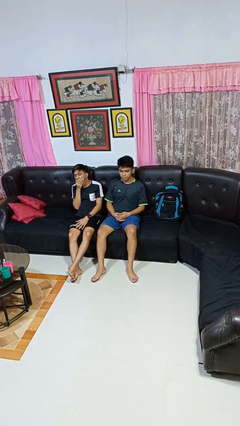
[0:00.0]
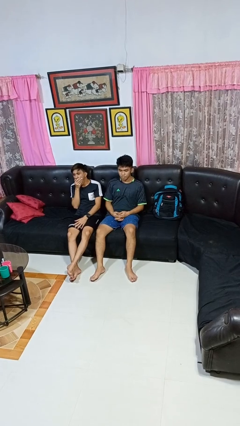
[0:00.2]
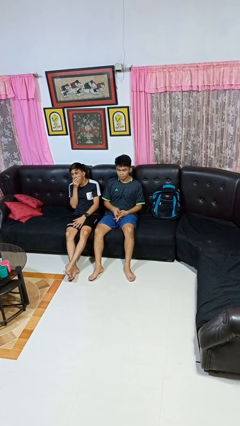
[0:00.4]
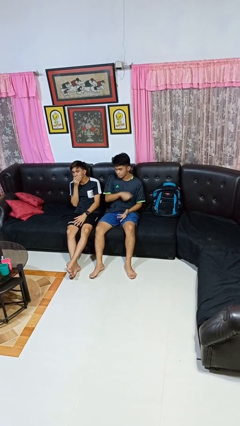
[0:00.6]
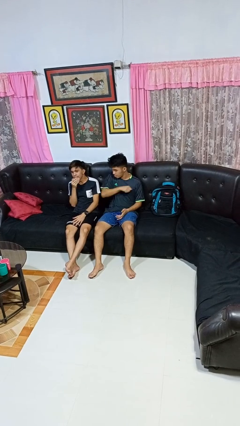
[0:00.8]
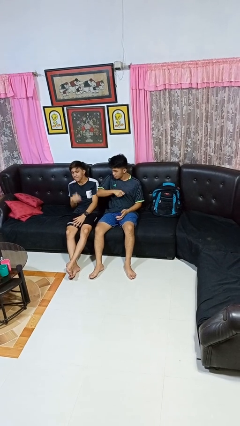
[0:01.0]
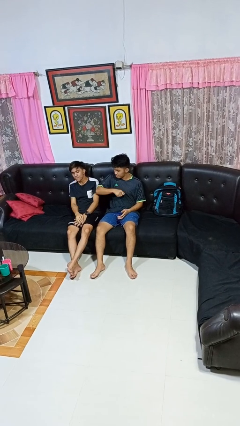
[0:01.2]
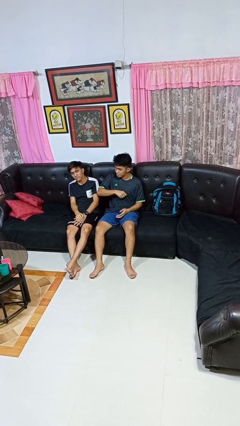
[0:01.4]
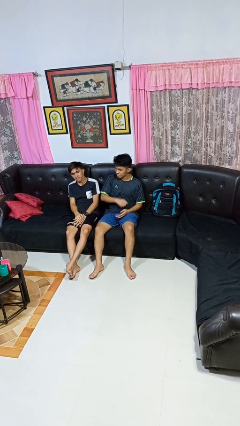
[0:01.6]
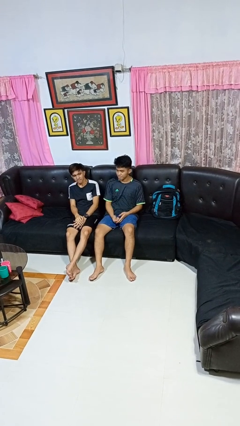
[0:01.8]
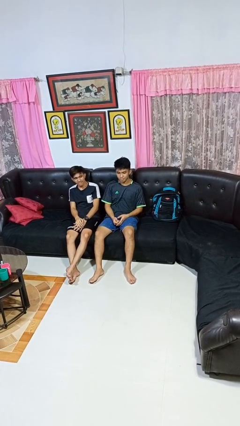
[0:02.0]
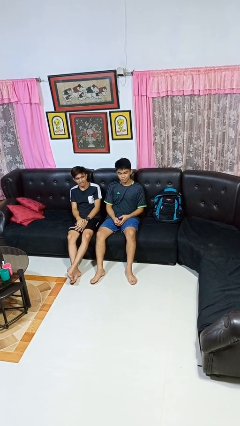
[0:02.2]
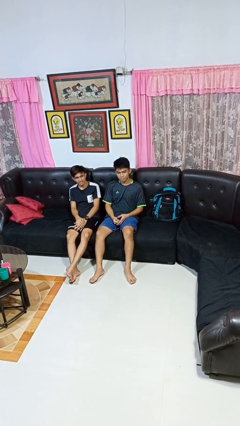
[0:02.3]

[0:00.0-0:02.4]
person nudges person with elbow

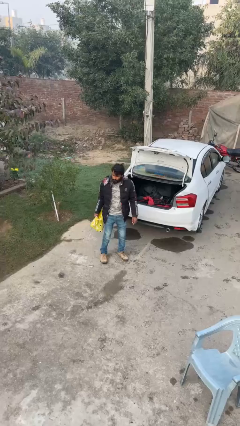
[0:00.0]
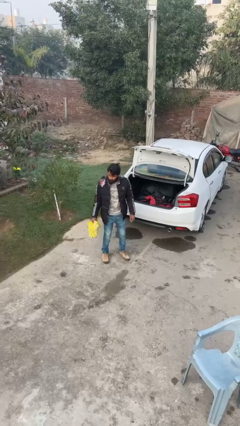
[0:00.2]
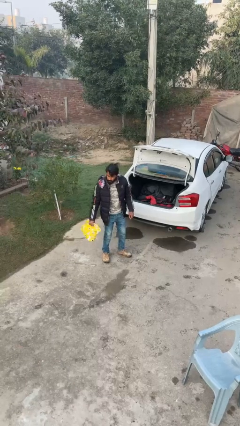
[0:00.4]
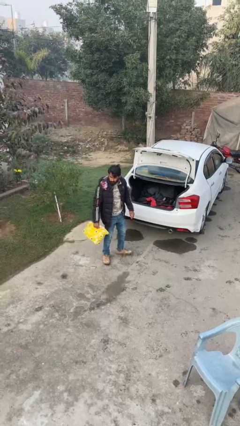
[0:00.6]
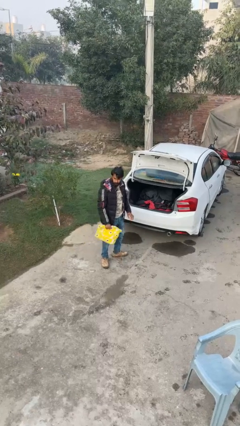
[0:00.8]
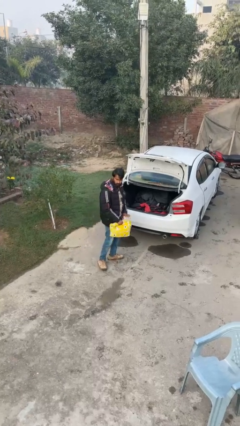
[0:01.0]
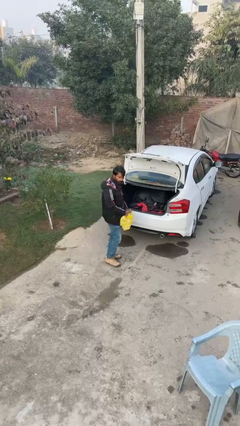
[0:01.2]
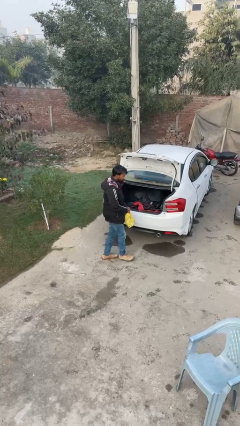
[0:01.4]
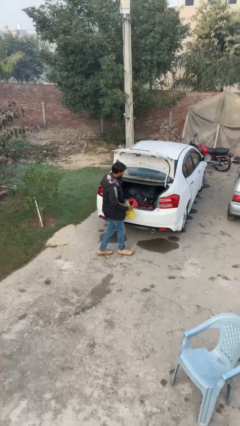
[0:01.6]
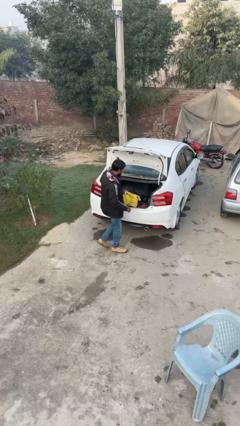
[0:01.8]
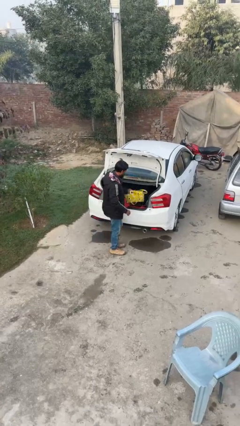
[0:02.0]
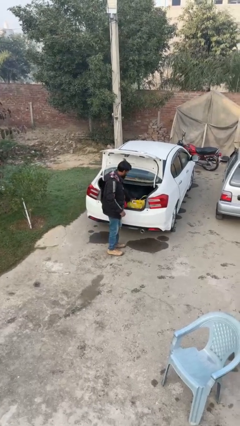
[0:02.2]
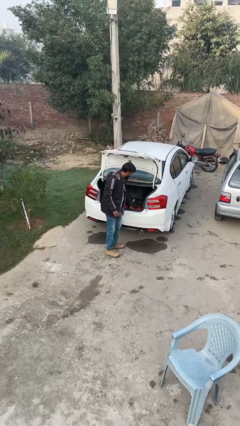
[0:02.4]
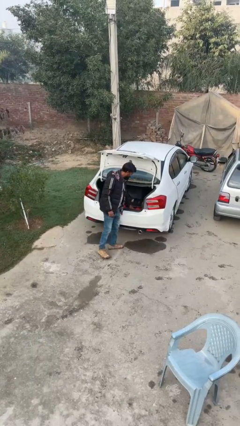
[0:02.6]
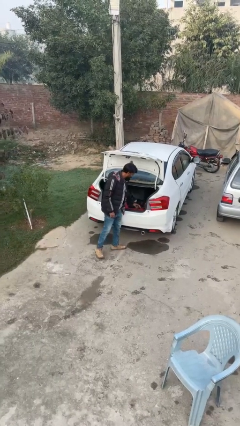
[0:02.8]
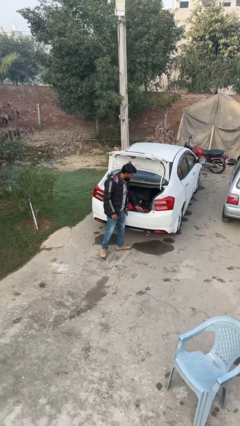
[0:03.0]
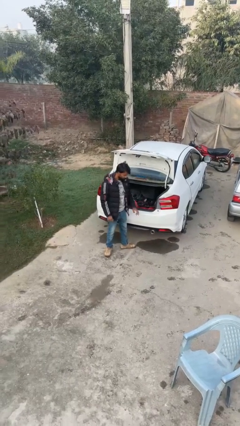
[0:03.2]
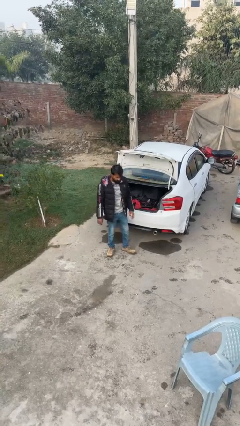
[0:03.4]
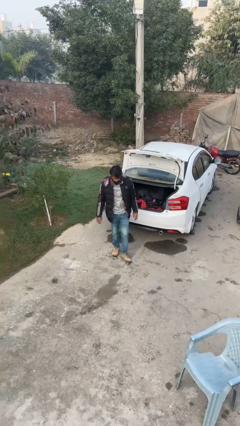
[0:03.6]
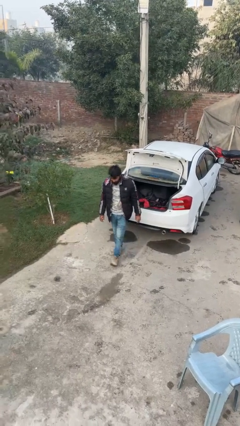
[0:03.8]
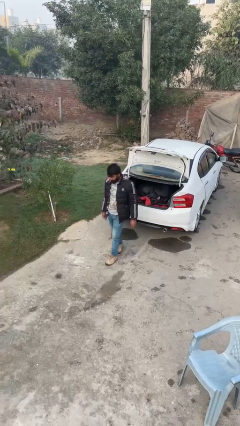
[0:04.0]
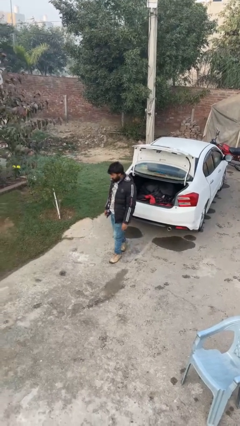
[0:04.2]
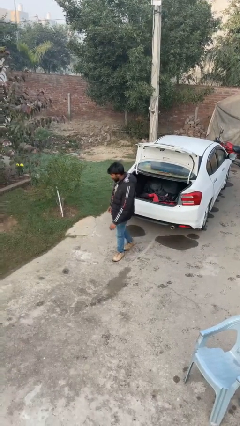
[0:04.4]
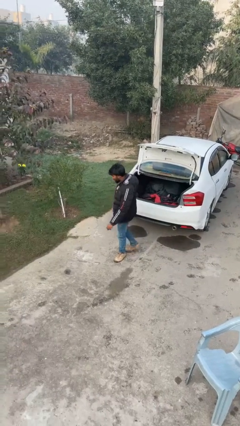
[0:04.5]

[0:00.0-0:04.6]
person loads car

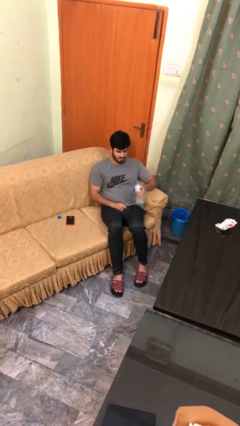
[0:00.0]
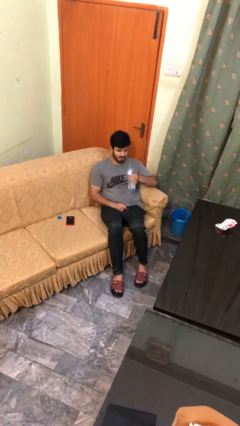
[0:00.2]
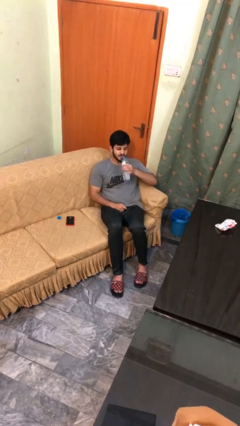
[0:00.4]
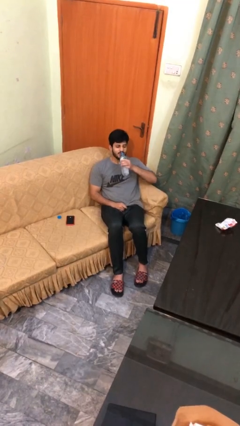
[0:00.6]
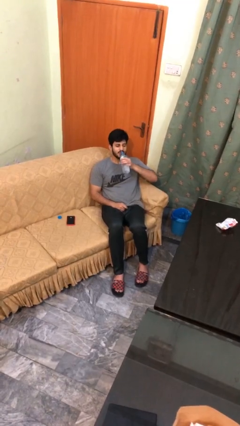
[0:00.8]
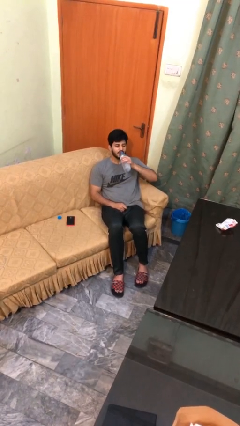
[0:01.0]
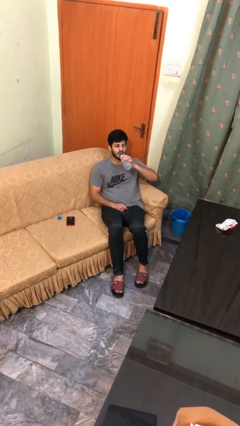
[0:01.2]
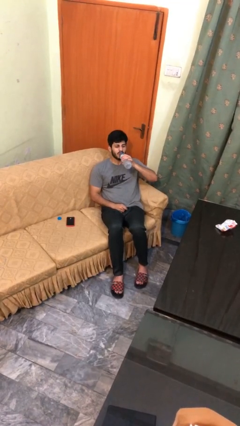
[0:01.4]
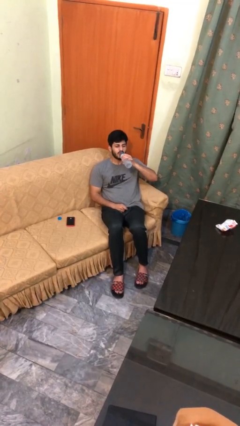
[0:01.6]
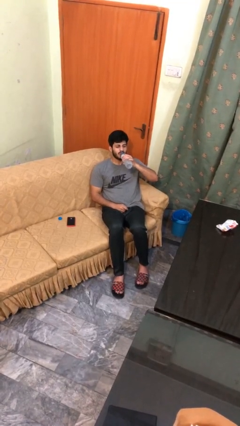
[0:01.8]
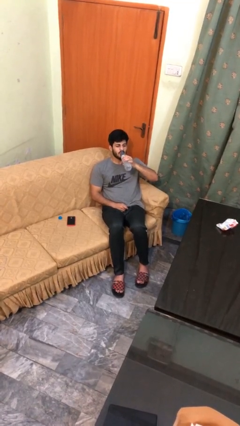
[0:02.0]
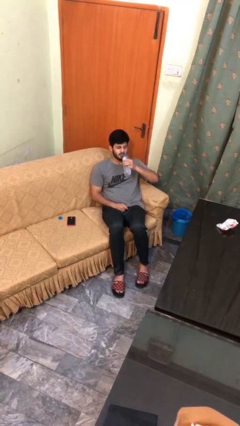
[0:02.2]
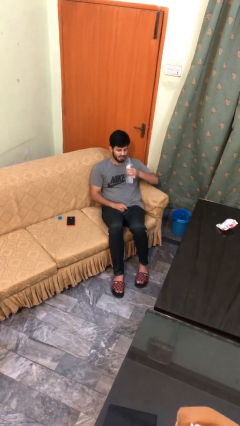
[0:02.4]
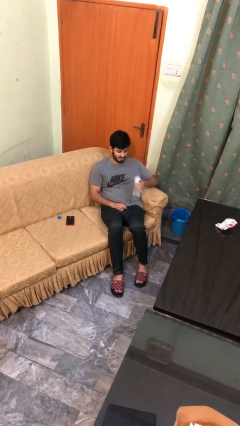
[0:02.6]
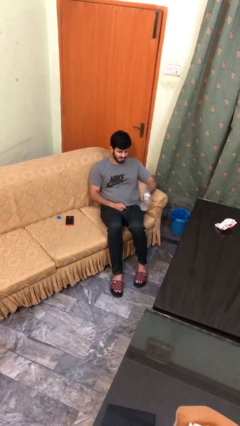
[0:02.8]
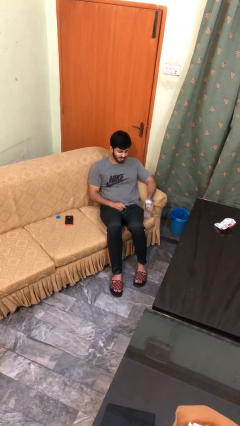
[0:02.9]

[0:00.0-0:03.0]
person drinks from bottle

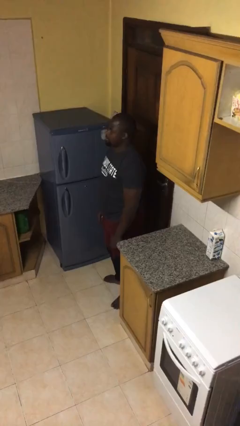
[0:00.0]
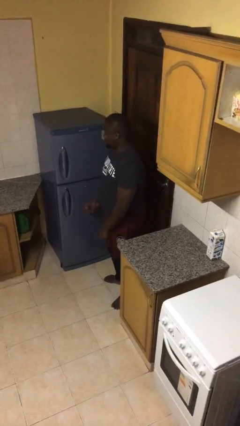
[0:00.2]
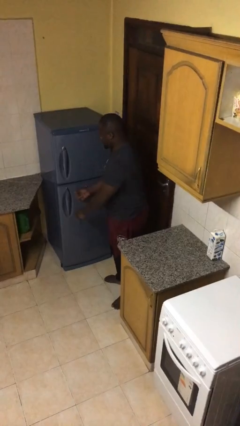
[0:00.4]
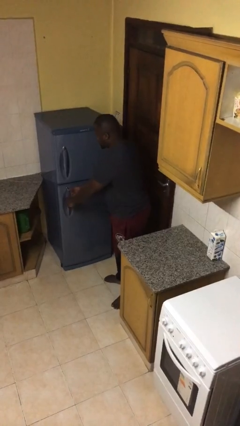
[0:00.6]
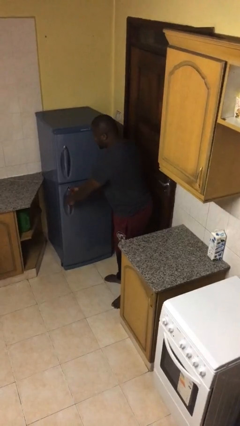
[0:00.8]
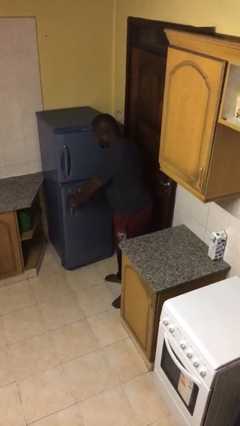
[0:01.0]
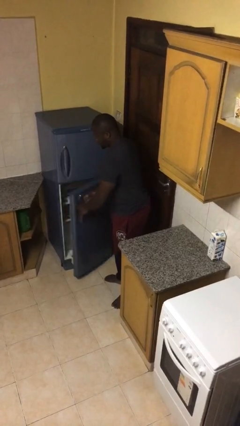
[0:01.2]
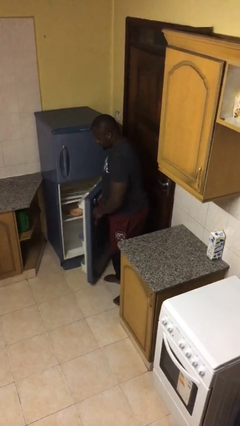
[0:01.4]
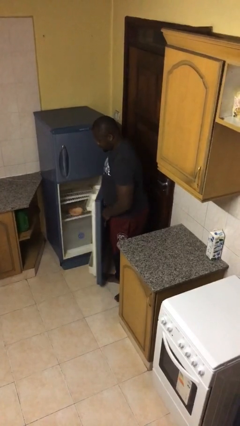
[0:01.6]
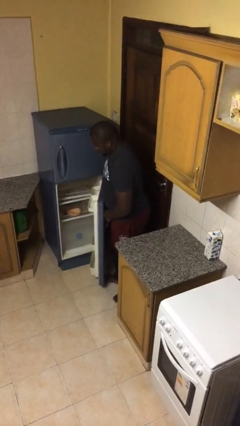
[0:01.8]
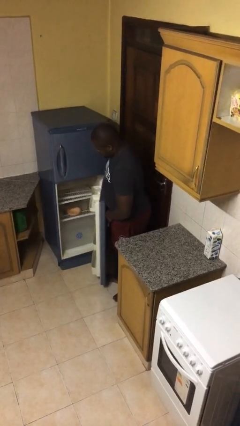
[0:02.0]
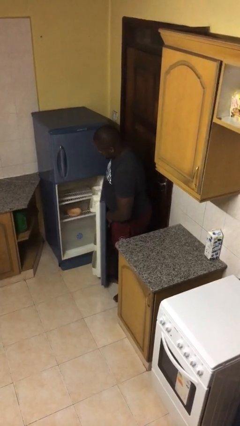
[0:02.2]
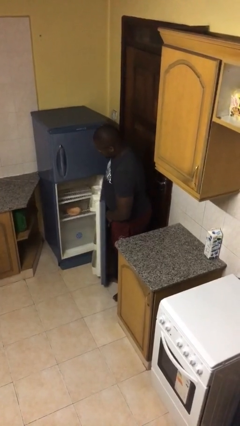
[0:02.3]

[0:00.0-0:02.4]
person opens refrigerator

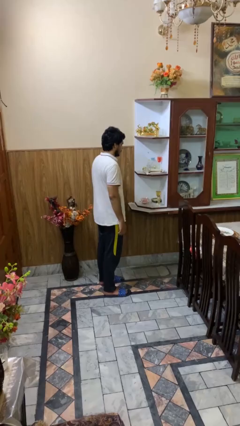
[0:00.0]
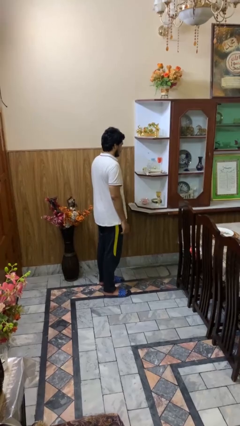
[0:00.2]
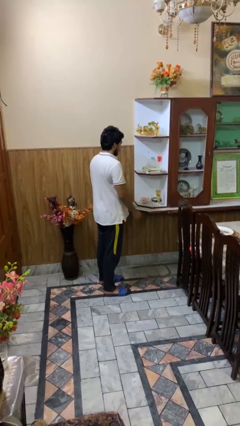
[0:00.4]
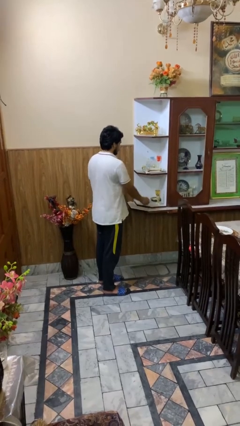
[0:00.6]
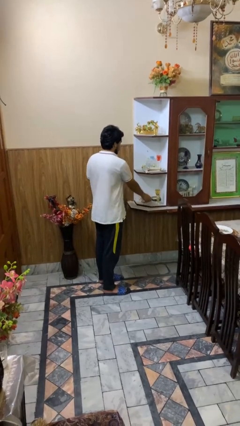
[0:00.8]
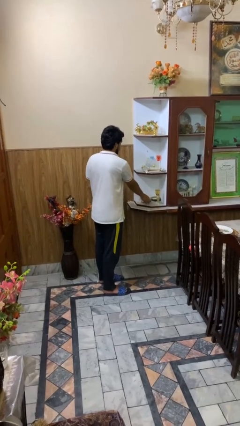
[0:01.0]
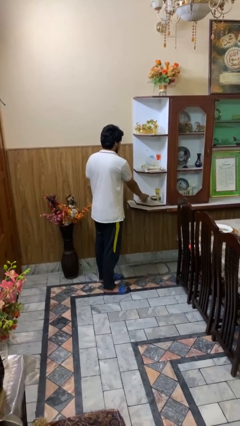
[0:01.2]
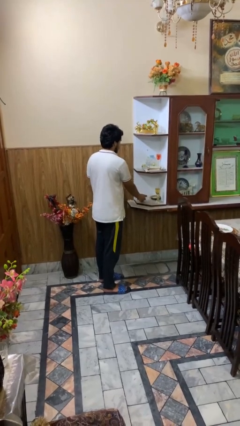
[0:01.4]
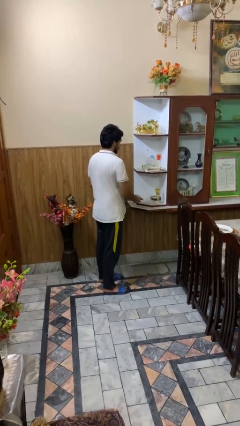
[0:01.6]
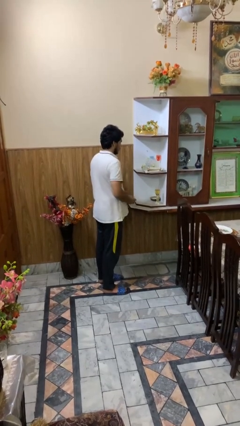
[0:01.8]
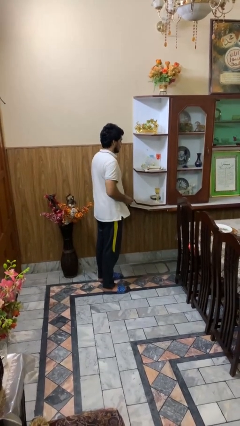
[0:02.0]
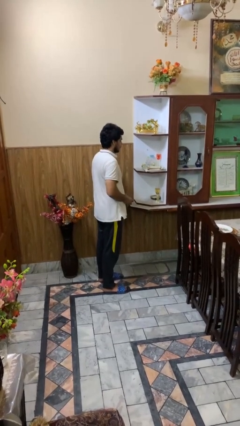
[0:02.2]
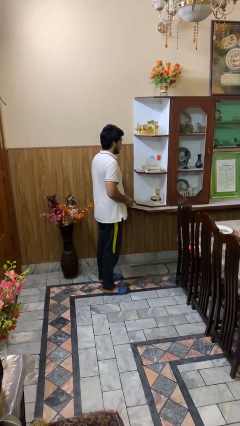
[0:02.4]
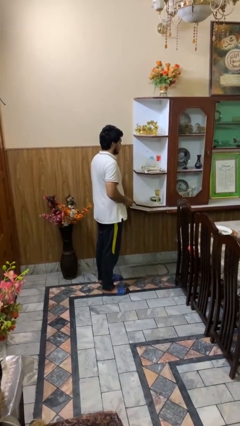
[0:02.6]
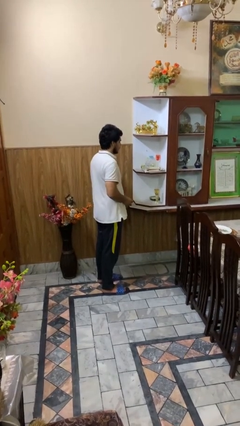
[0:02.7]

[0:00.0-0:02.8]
person picks up object from cabinet

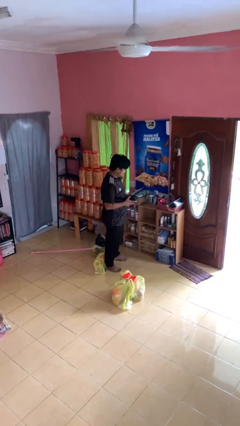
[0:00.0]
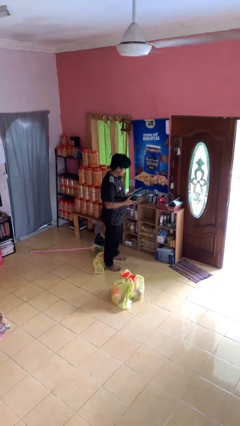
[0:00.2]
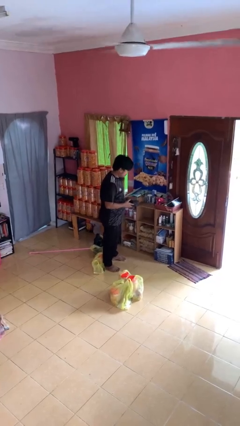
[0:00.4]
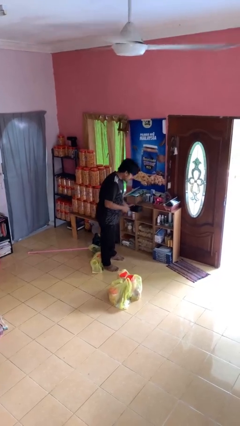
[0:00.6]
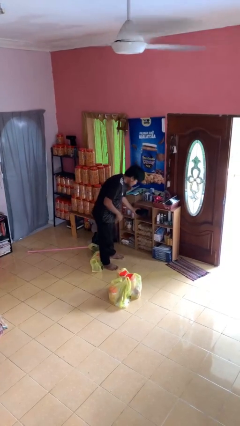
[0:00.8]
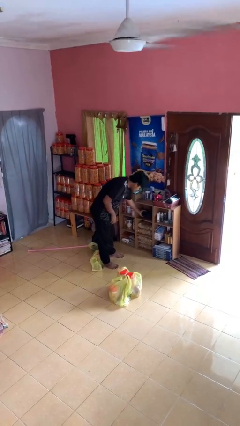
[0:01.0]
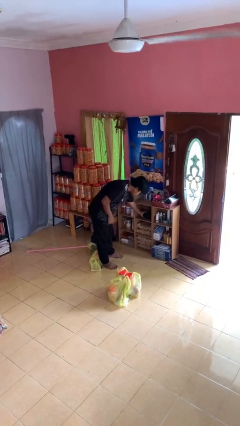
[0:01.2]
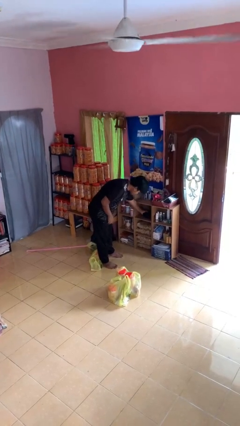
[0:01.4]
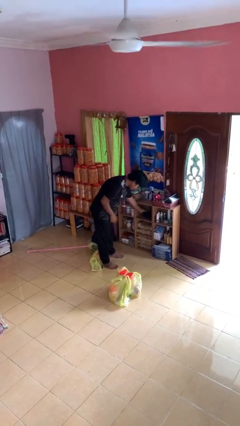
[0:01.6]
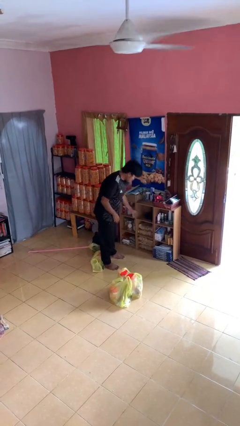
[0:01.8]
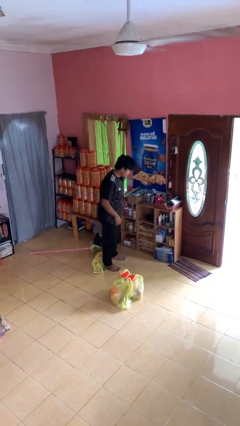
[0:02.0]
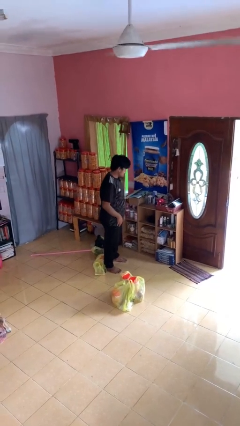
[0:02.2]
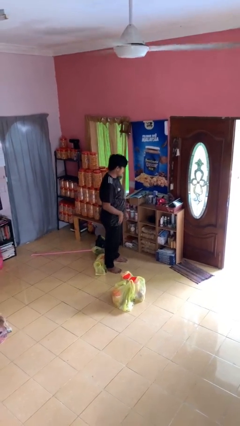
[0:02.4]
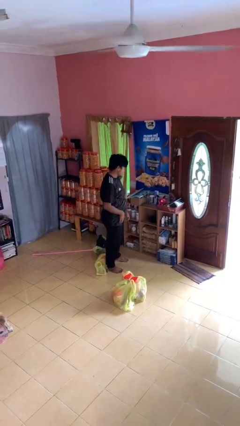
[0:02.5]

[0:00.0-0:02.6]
person puts object in cabinet
